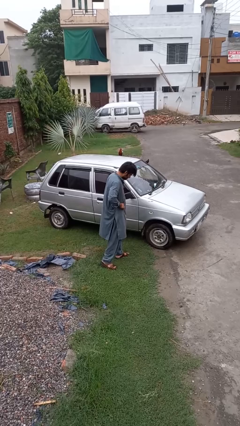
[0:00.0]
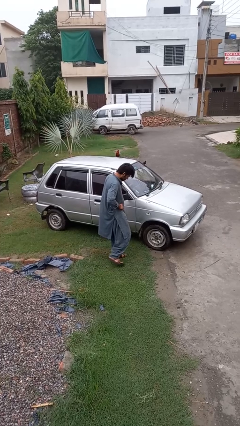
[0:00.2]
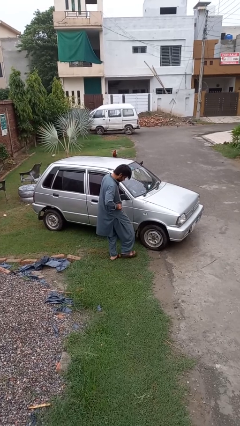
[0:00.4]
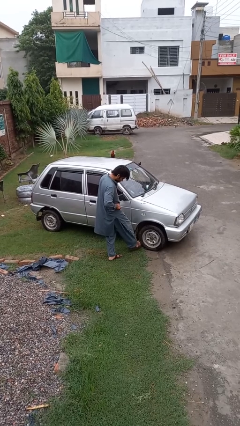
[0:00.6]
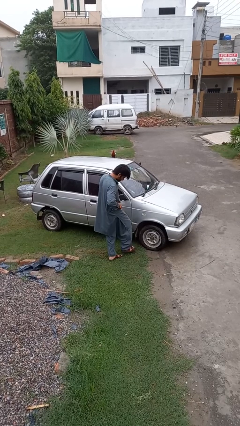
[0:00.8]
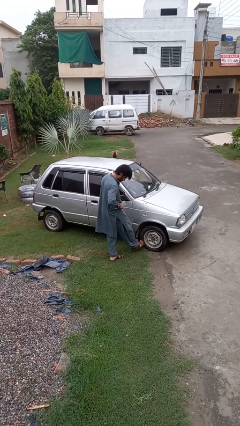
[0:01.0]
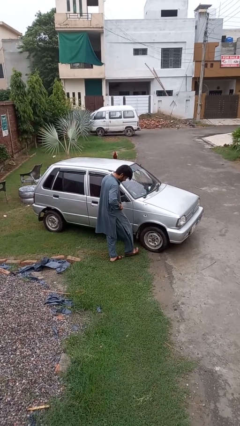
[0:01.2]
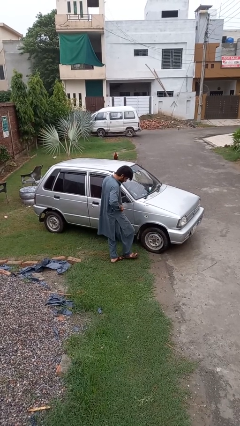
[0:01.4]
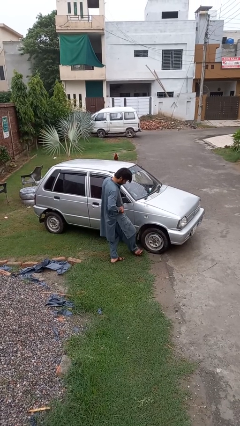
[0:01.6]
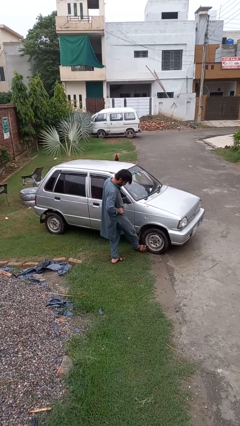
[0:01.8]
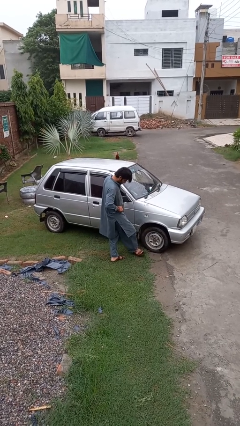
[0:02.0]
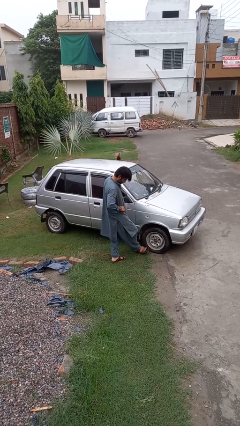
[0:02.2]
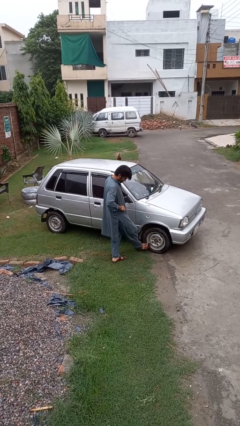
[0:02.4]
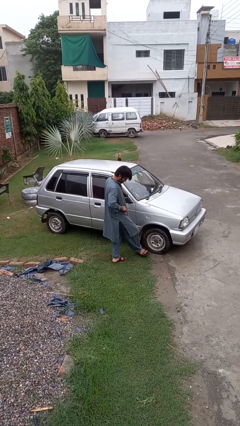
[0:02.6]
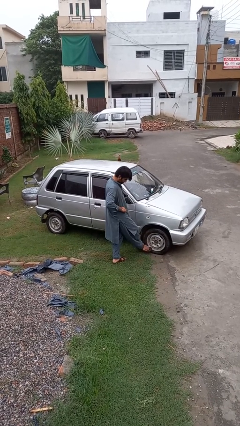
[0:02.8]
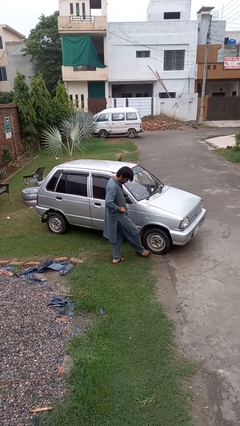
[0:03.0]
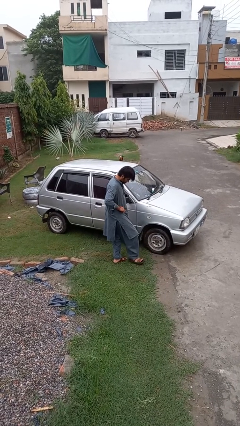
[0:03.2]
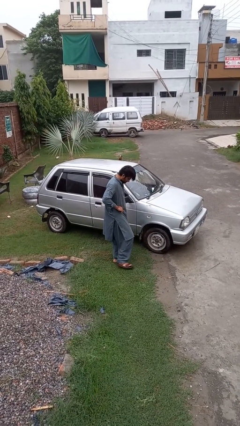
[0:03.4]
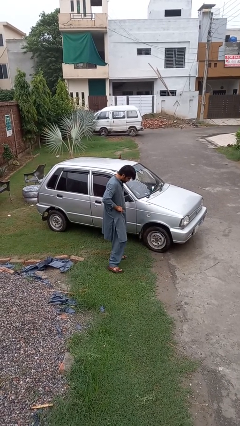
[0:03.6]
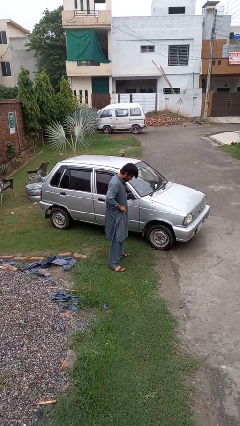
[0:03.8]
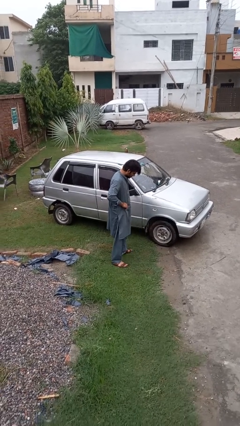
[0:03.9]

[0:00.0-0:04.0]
person kicks car tires

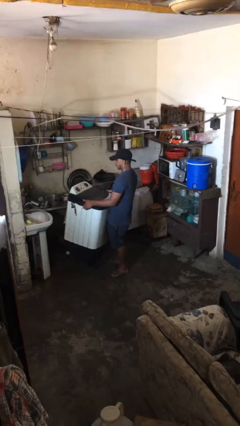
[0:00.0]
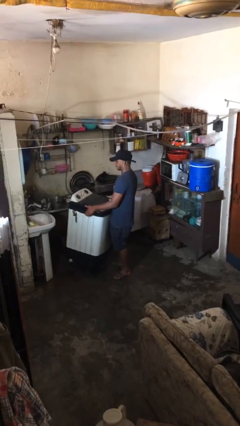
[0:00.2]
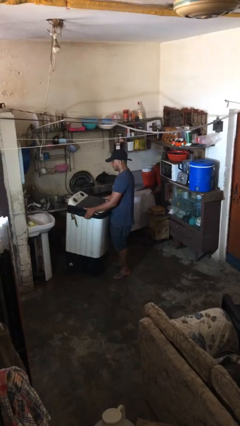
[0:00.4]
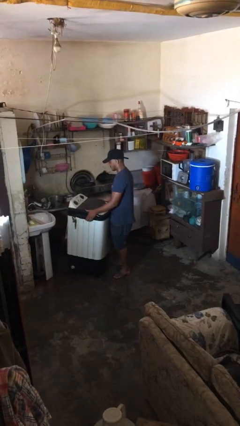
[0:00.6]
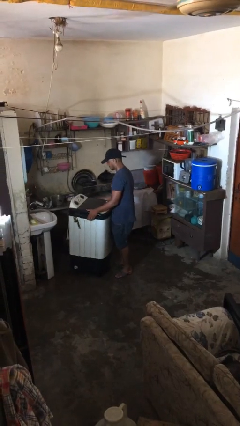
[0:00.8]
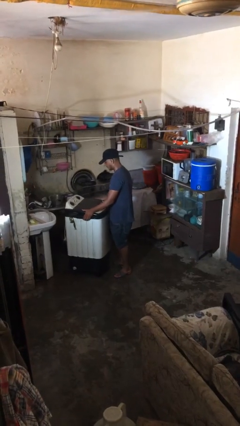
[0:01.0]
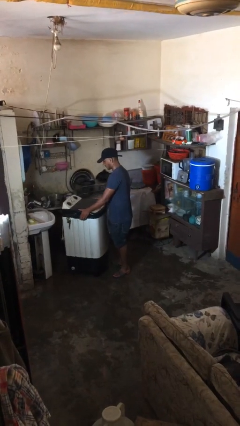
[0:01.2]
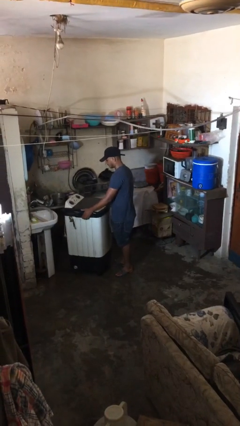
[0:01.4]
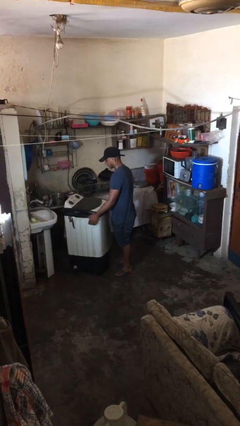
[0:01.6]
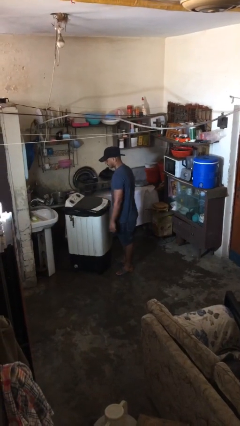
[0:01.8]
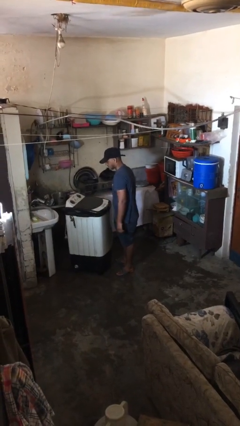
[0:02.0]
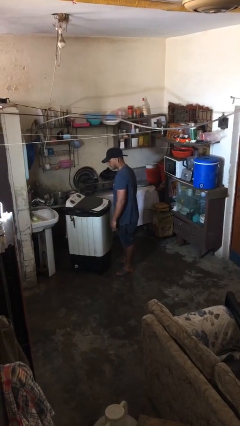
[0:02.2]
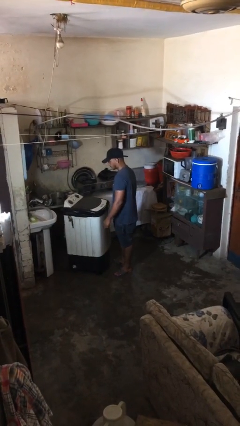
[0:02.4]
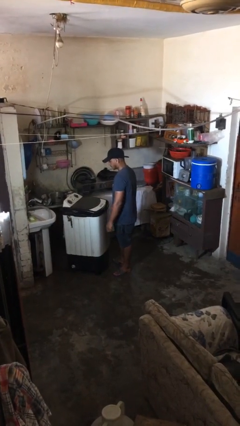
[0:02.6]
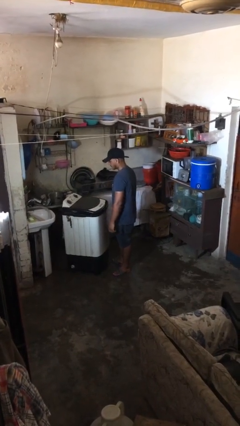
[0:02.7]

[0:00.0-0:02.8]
person puts down object on floor

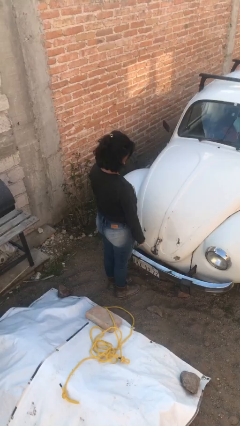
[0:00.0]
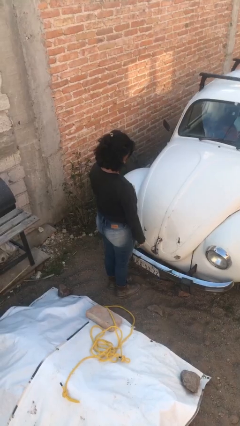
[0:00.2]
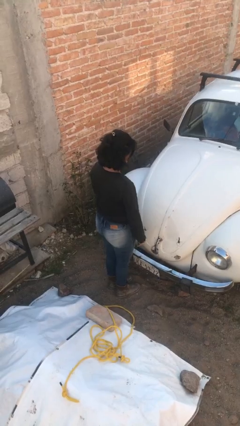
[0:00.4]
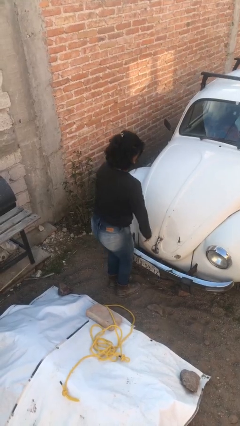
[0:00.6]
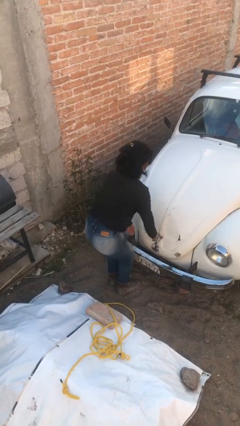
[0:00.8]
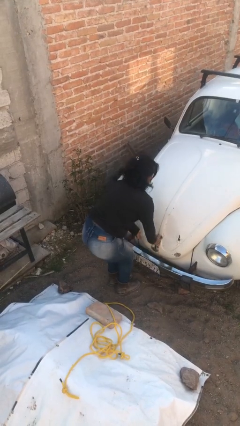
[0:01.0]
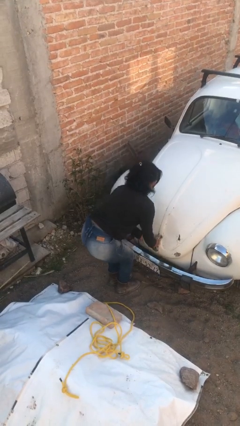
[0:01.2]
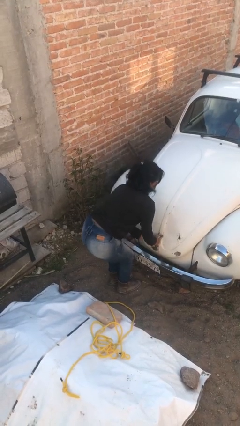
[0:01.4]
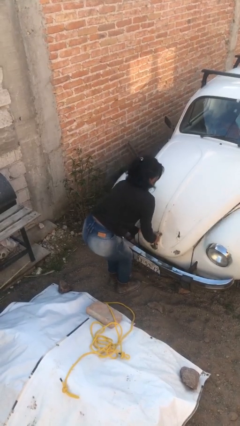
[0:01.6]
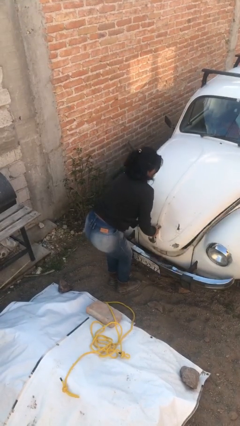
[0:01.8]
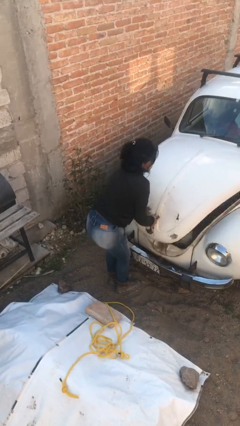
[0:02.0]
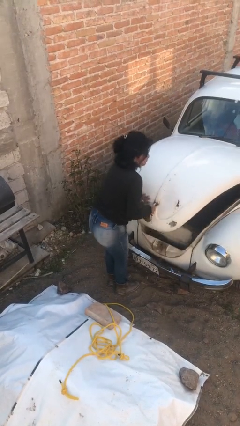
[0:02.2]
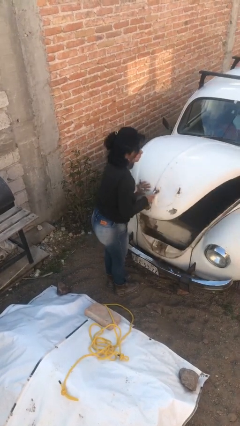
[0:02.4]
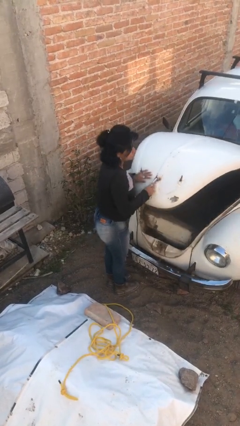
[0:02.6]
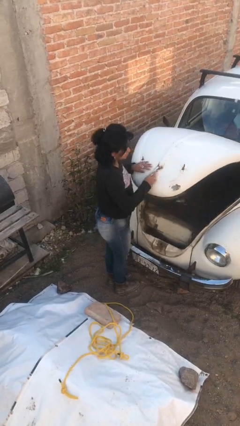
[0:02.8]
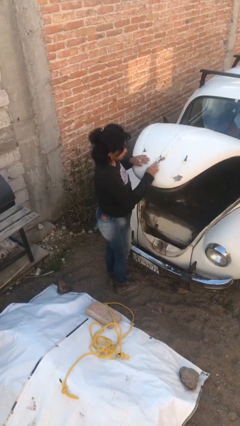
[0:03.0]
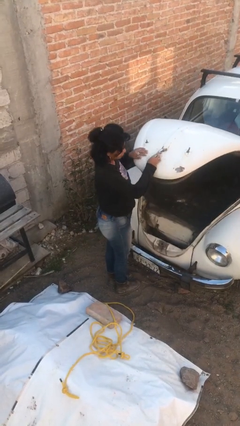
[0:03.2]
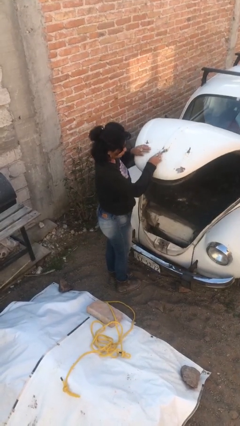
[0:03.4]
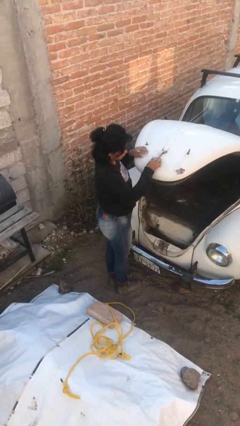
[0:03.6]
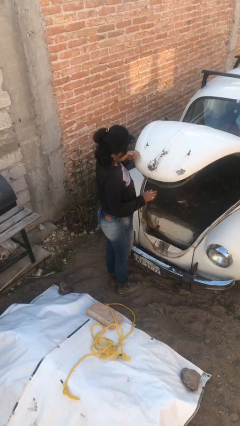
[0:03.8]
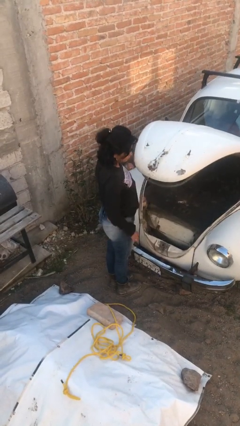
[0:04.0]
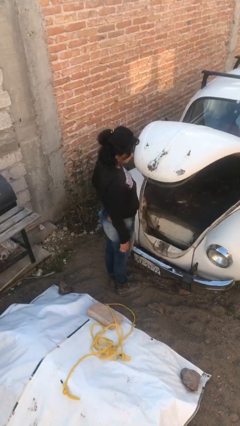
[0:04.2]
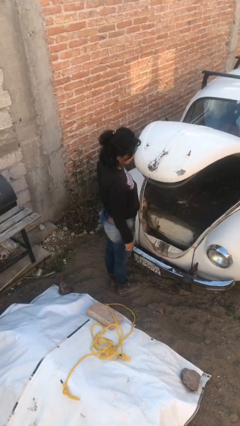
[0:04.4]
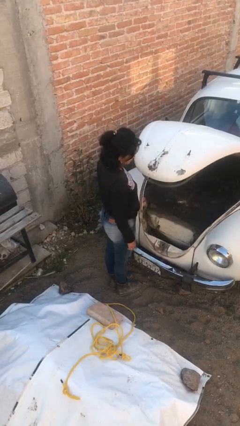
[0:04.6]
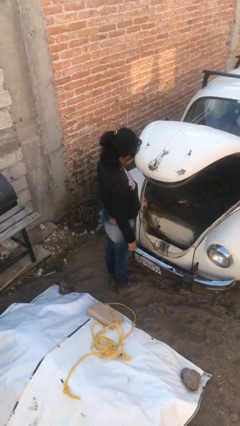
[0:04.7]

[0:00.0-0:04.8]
person opens car trunk

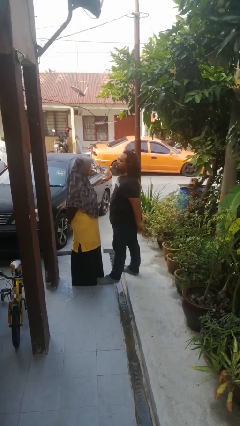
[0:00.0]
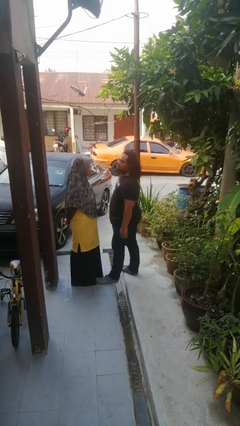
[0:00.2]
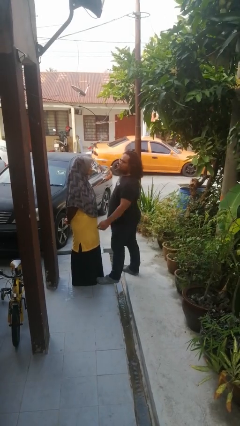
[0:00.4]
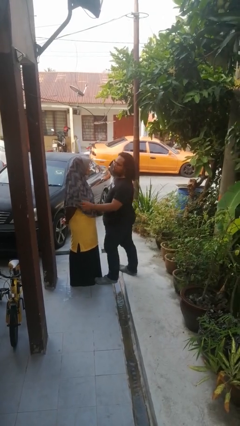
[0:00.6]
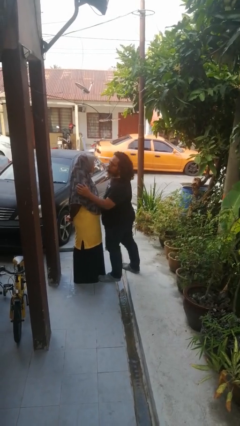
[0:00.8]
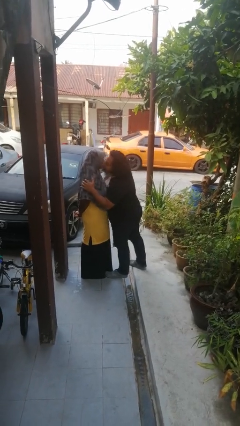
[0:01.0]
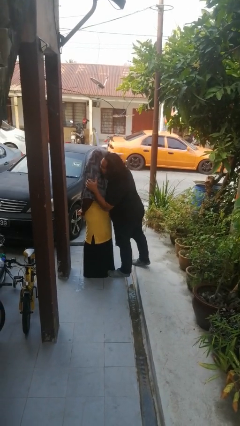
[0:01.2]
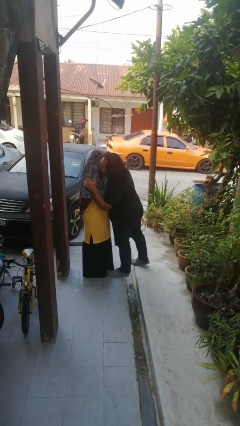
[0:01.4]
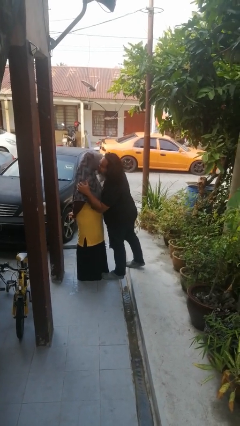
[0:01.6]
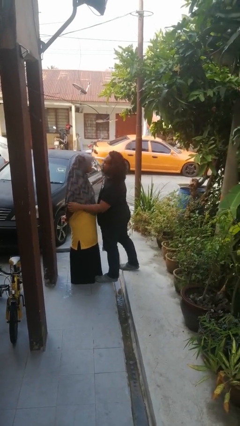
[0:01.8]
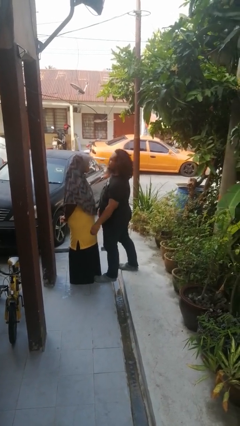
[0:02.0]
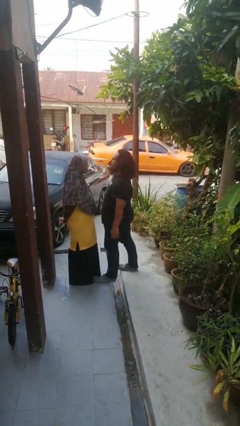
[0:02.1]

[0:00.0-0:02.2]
person kisses cheek of person

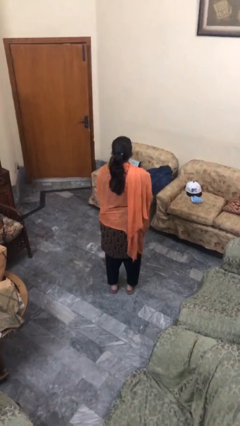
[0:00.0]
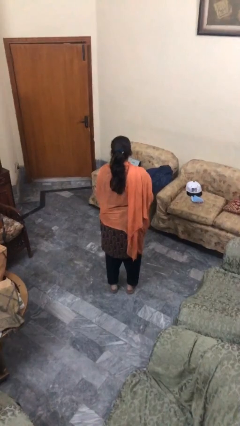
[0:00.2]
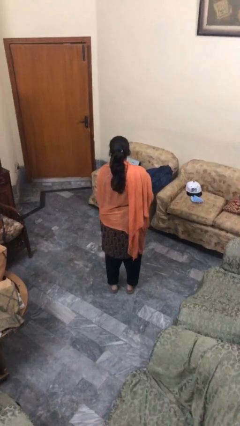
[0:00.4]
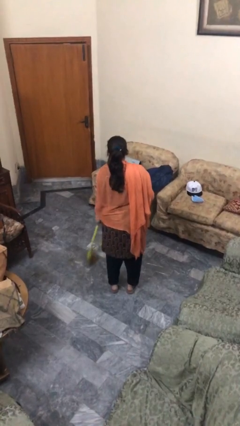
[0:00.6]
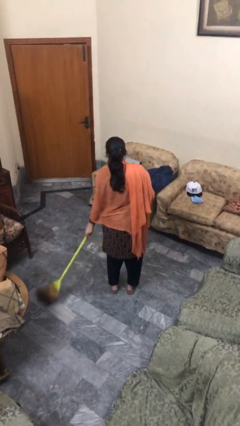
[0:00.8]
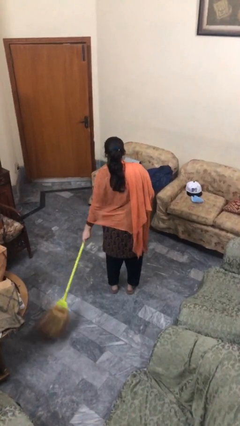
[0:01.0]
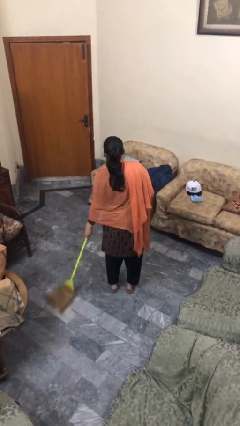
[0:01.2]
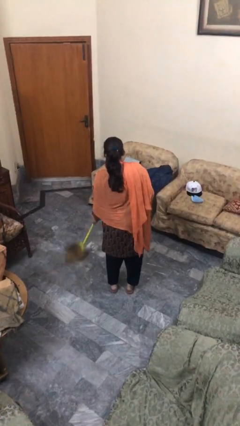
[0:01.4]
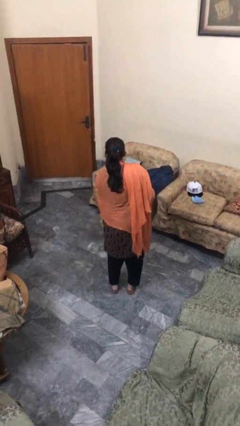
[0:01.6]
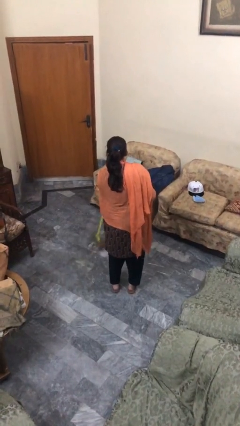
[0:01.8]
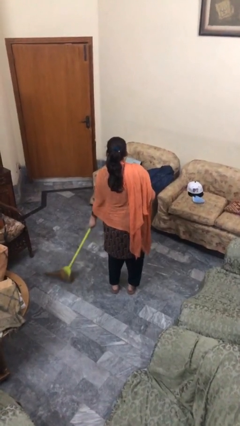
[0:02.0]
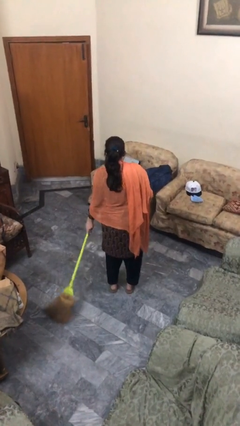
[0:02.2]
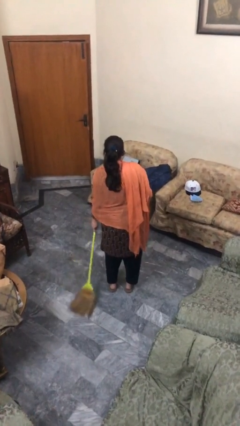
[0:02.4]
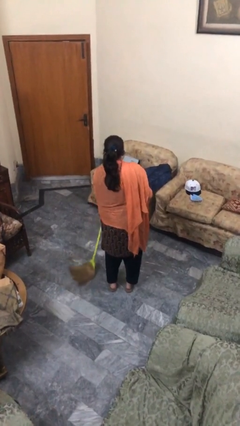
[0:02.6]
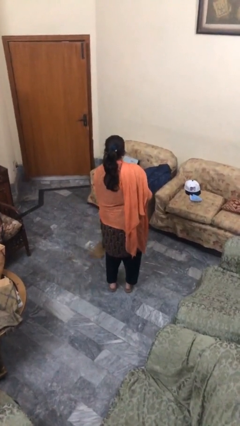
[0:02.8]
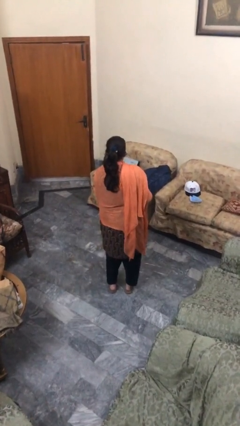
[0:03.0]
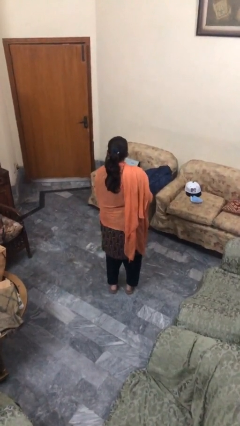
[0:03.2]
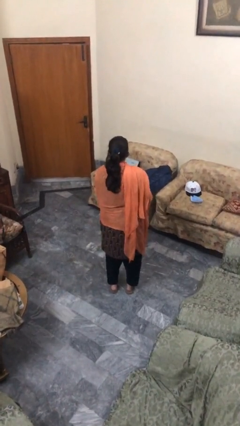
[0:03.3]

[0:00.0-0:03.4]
person sweeps floor

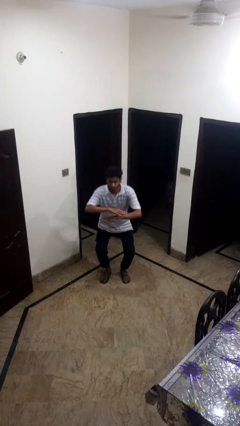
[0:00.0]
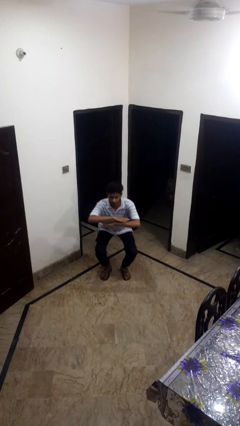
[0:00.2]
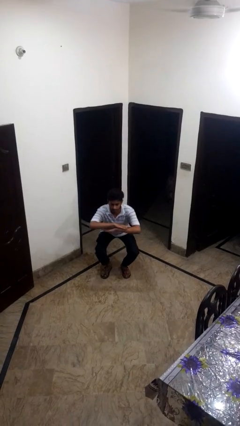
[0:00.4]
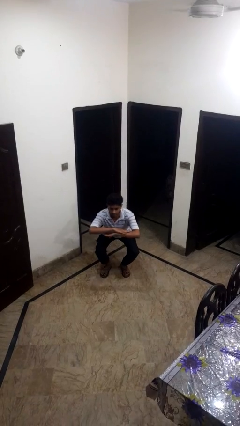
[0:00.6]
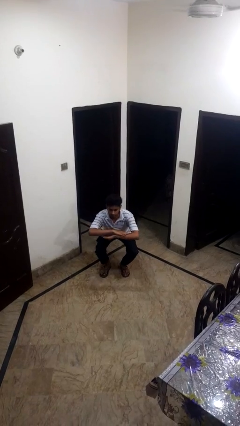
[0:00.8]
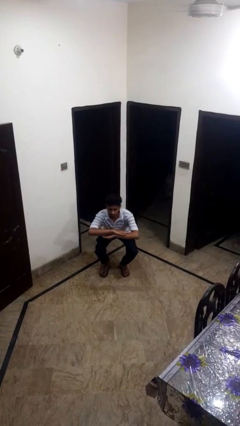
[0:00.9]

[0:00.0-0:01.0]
person squats
